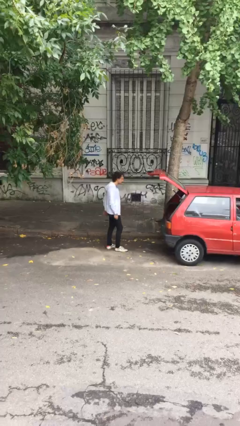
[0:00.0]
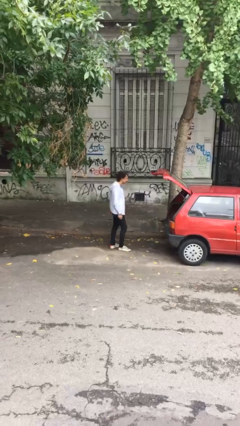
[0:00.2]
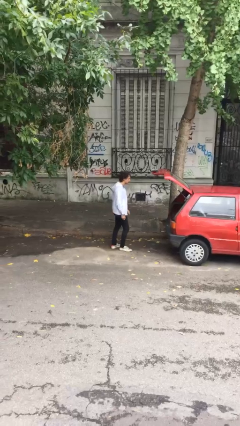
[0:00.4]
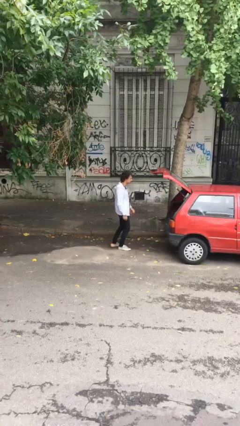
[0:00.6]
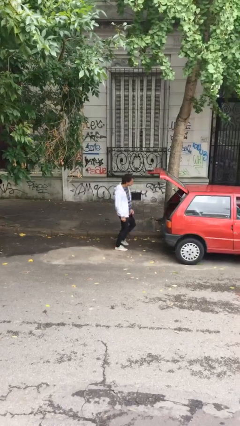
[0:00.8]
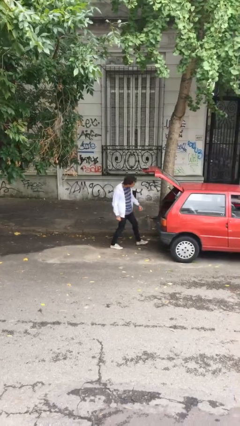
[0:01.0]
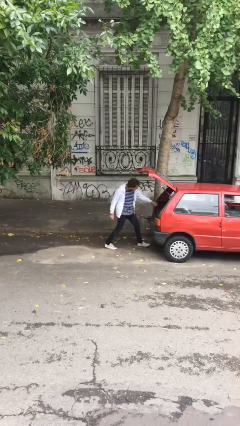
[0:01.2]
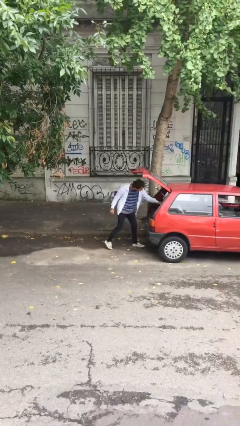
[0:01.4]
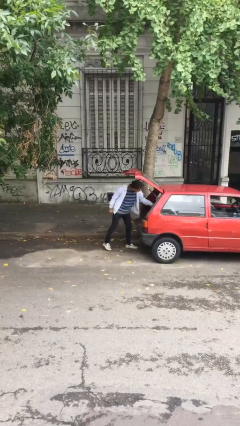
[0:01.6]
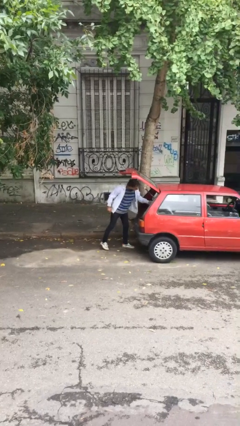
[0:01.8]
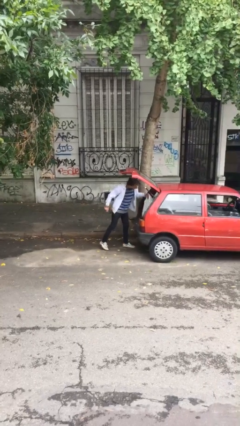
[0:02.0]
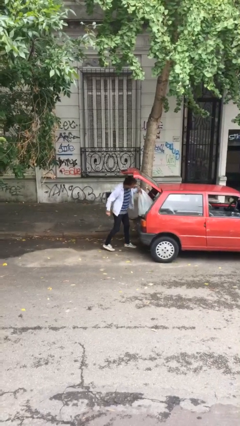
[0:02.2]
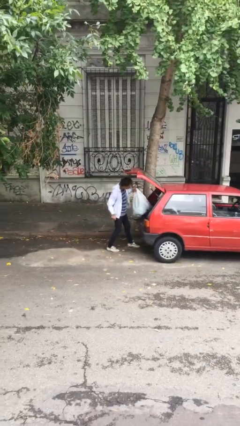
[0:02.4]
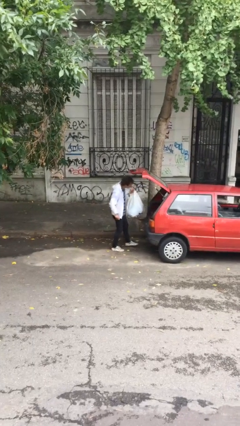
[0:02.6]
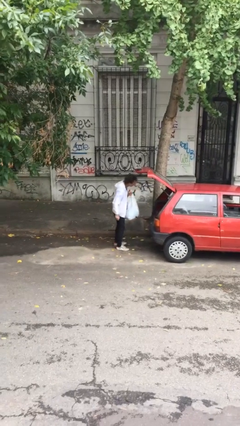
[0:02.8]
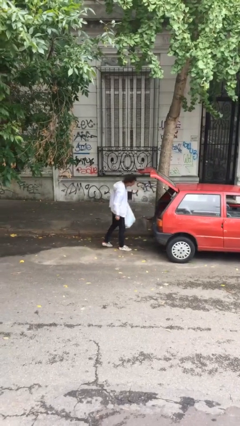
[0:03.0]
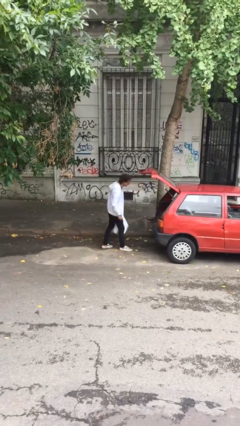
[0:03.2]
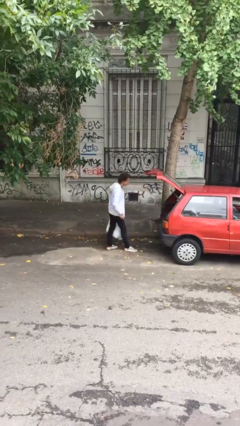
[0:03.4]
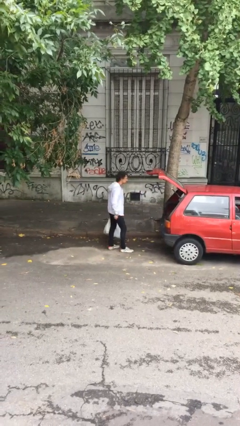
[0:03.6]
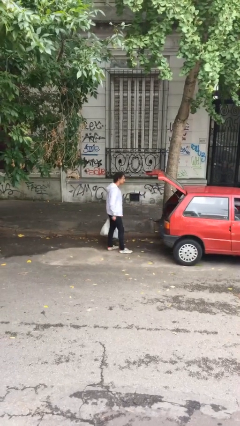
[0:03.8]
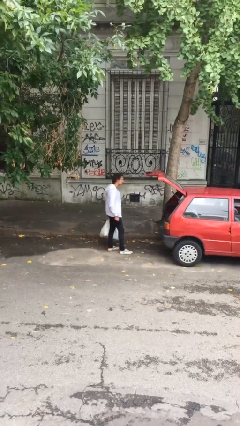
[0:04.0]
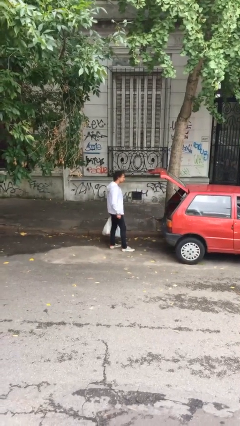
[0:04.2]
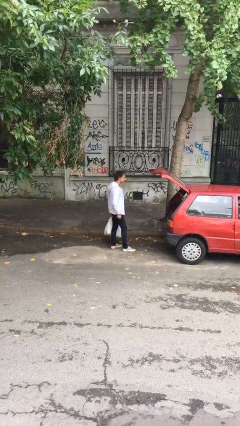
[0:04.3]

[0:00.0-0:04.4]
person unloads car

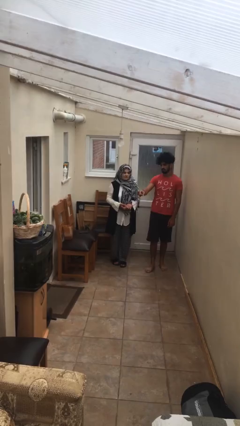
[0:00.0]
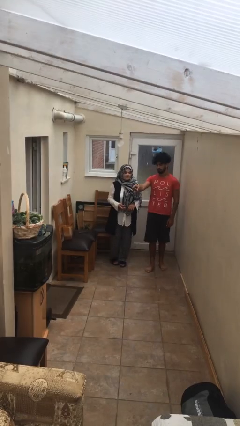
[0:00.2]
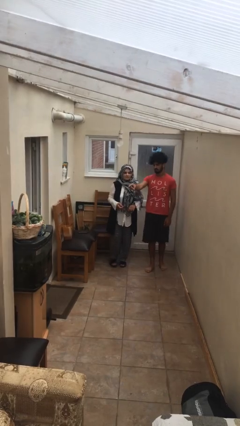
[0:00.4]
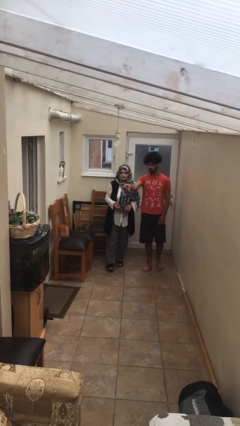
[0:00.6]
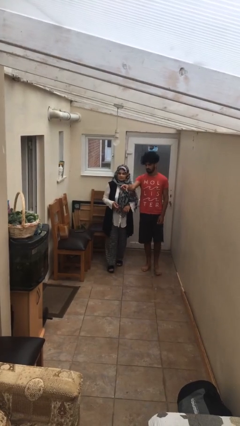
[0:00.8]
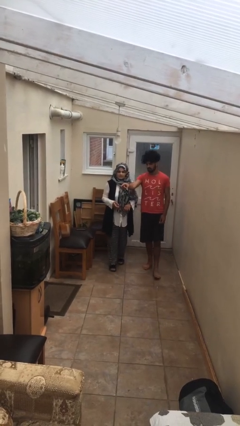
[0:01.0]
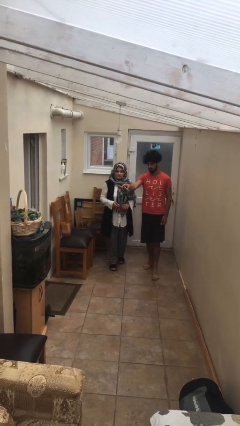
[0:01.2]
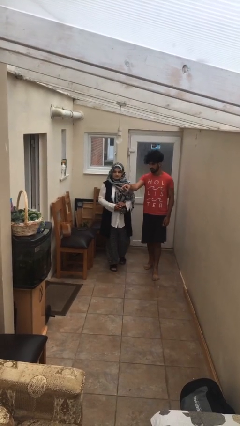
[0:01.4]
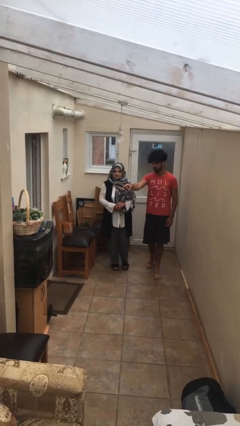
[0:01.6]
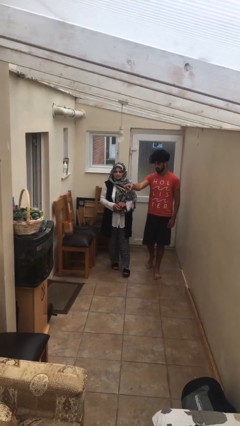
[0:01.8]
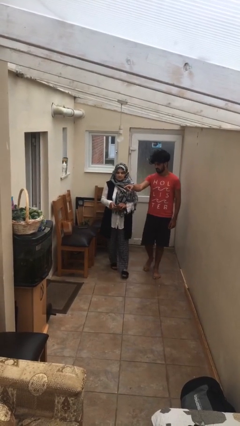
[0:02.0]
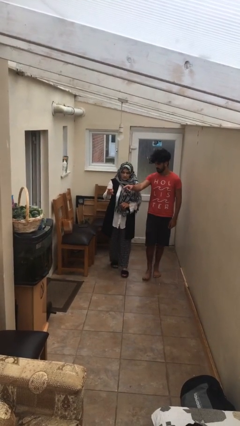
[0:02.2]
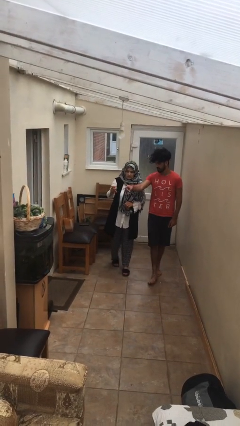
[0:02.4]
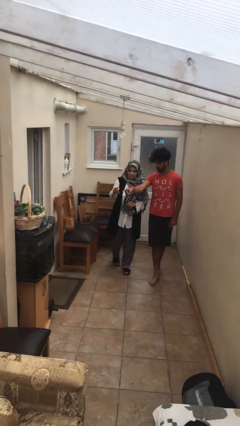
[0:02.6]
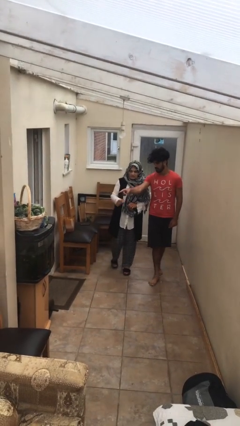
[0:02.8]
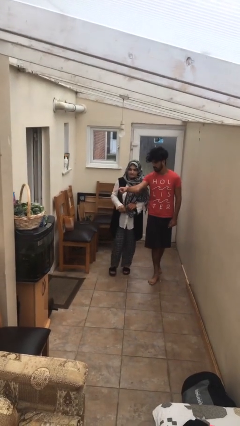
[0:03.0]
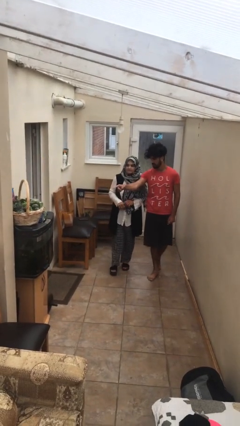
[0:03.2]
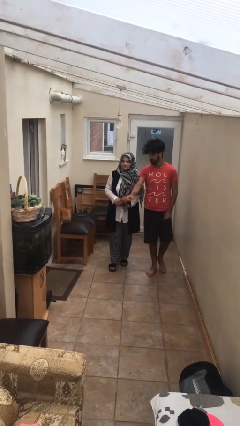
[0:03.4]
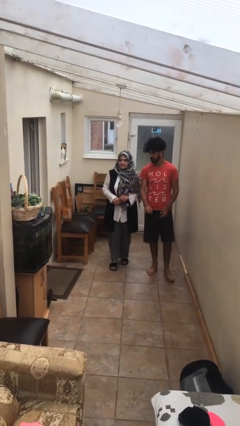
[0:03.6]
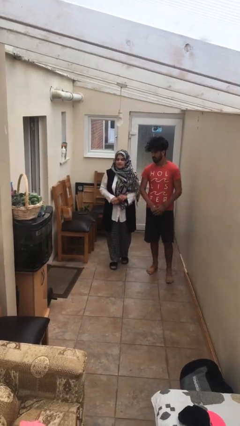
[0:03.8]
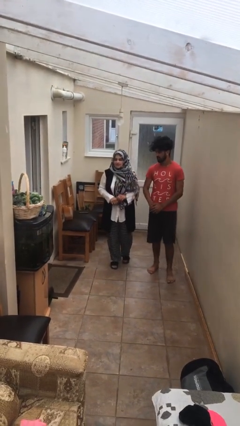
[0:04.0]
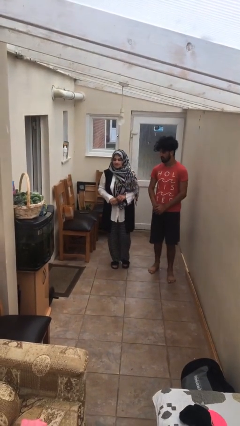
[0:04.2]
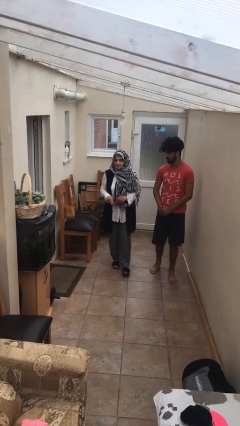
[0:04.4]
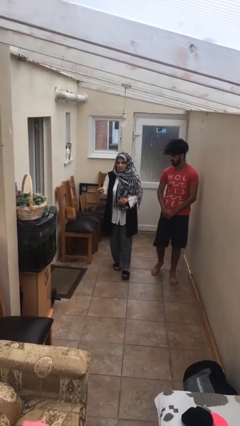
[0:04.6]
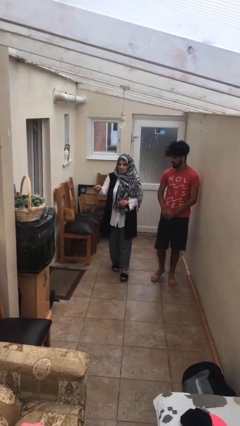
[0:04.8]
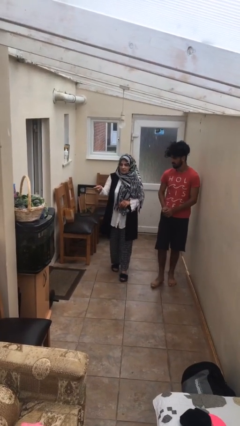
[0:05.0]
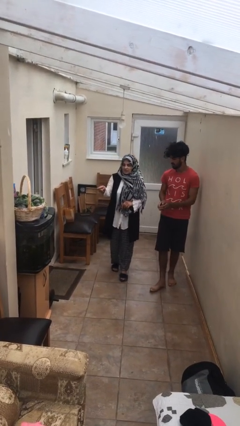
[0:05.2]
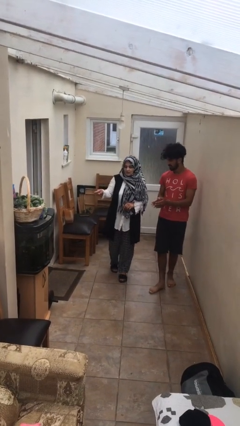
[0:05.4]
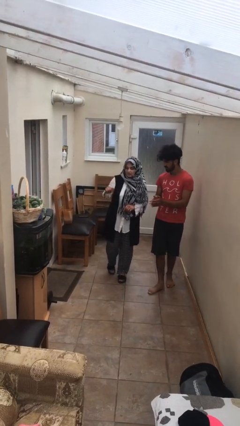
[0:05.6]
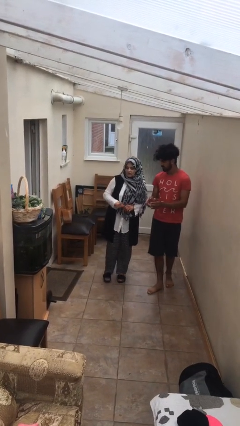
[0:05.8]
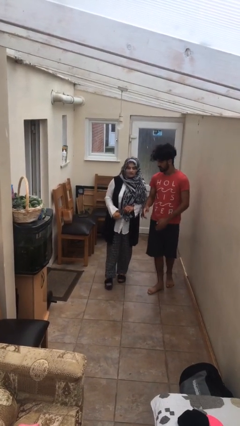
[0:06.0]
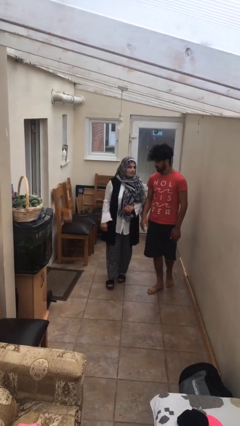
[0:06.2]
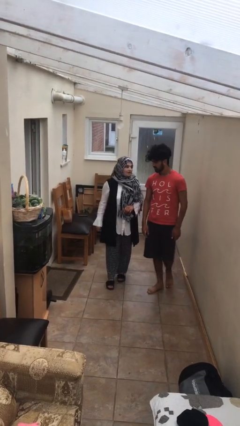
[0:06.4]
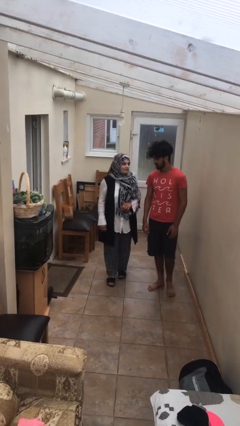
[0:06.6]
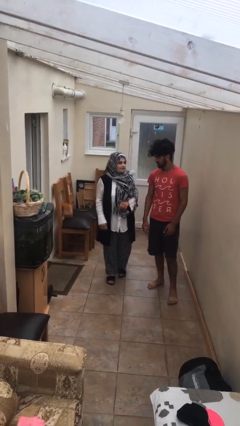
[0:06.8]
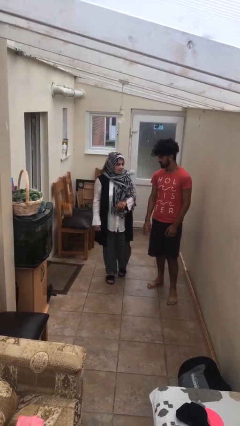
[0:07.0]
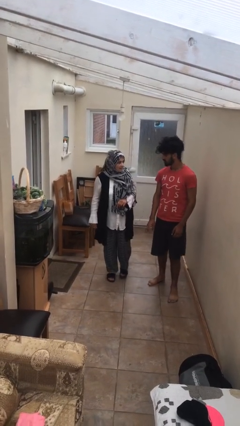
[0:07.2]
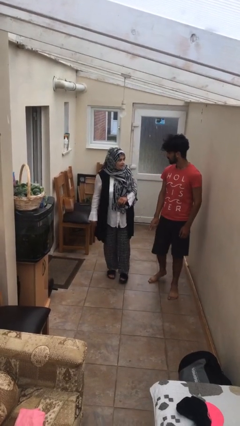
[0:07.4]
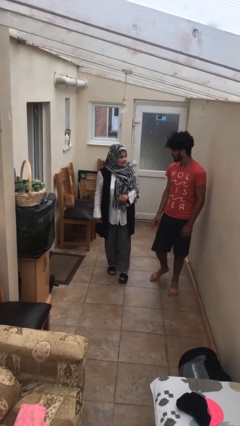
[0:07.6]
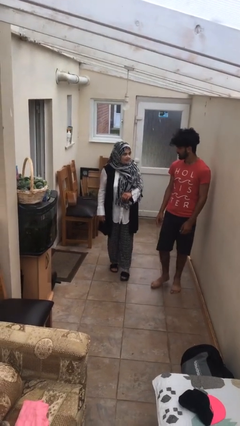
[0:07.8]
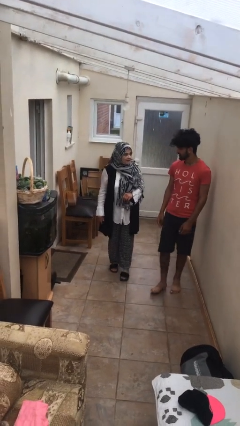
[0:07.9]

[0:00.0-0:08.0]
person talks to person

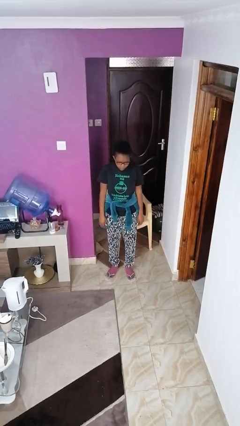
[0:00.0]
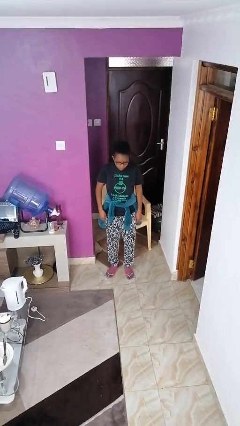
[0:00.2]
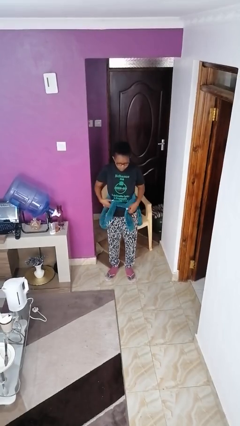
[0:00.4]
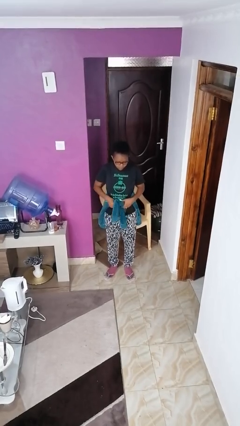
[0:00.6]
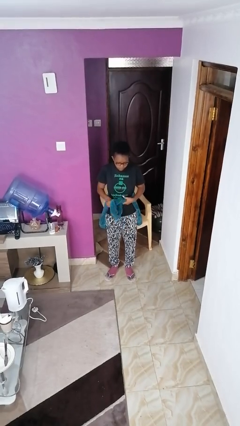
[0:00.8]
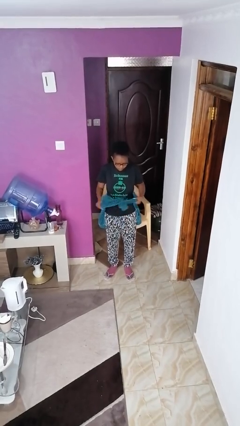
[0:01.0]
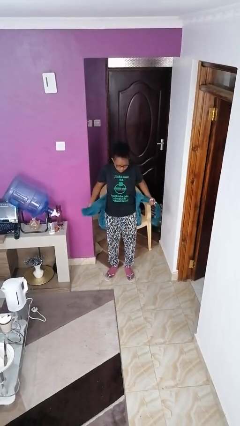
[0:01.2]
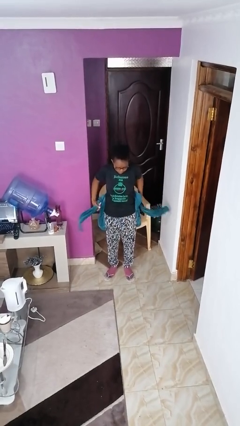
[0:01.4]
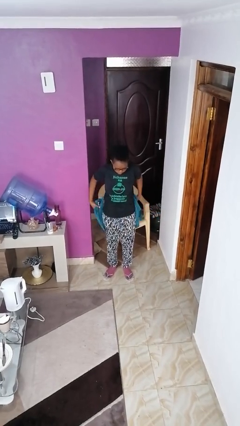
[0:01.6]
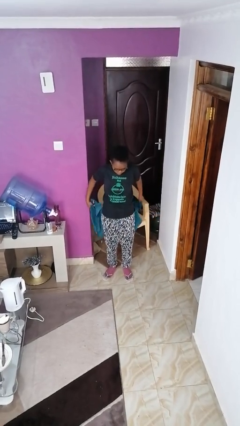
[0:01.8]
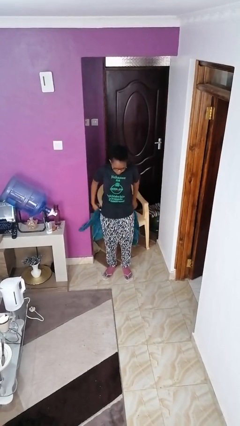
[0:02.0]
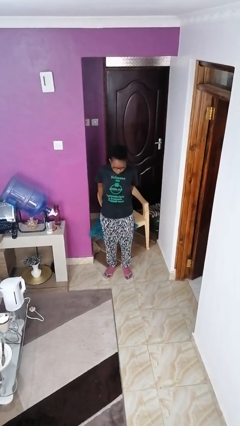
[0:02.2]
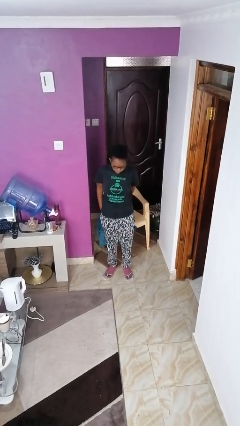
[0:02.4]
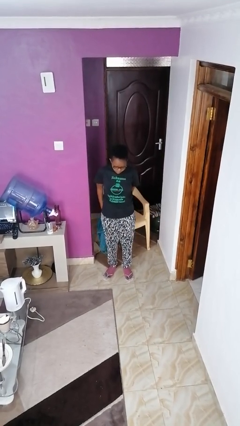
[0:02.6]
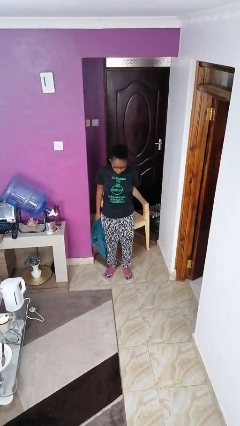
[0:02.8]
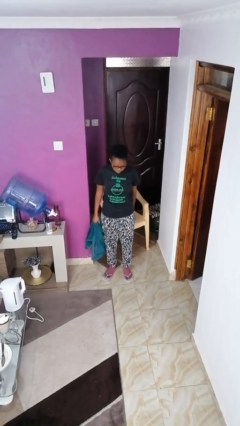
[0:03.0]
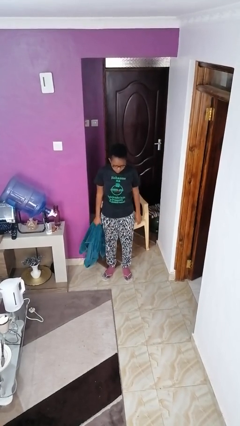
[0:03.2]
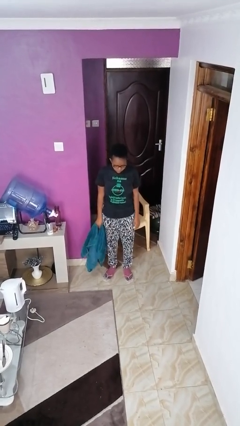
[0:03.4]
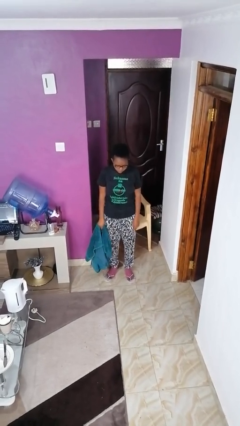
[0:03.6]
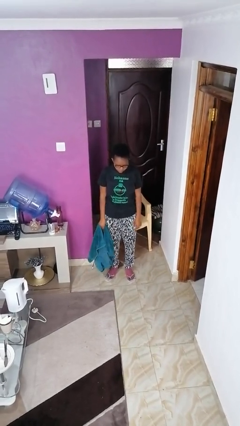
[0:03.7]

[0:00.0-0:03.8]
person unties jacket around waist

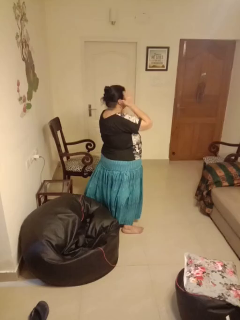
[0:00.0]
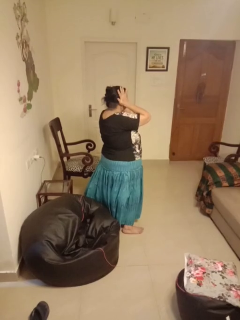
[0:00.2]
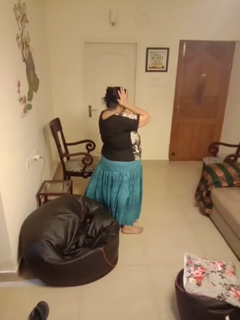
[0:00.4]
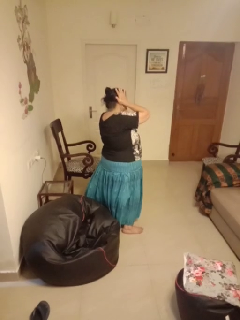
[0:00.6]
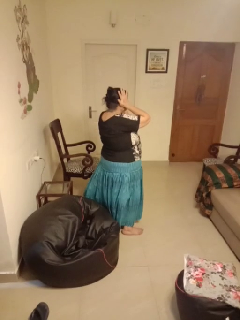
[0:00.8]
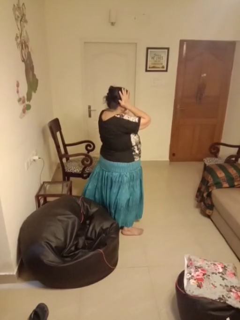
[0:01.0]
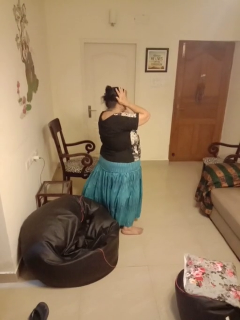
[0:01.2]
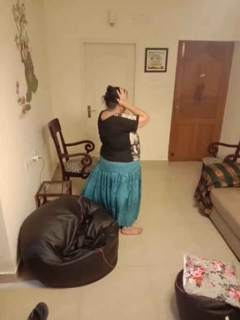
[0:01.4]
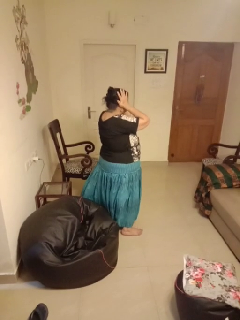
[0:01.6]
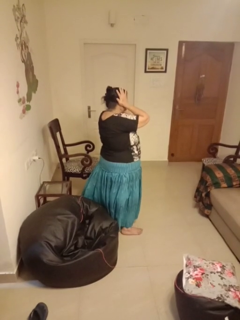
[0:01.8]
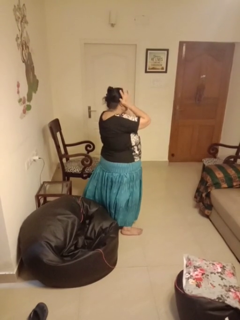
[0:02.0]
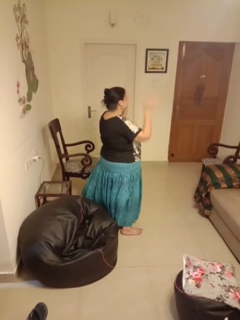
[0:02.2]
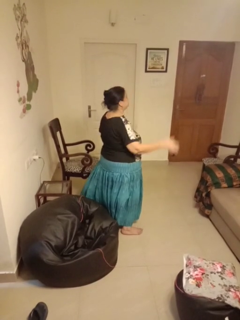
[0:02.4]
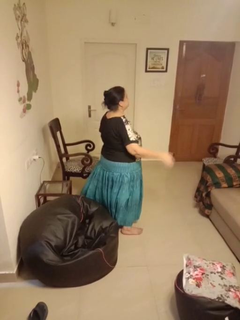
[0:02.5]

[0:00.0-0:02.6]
person puts fingers in ear
